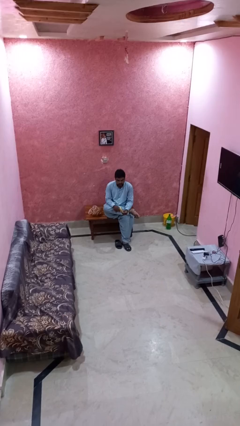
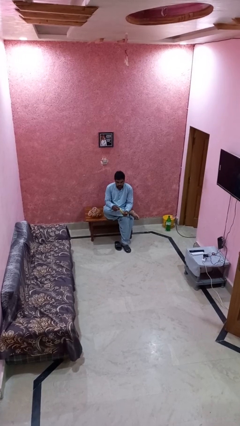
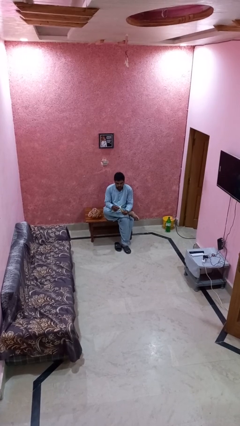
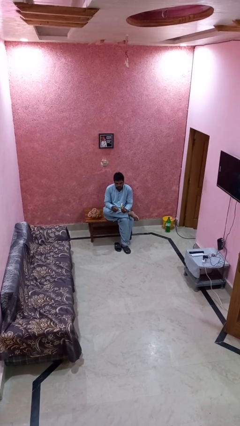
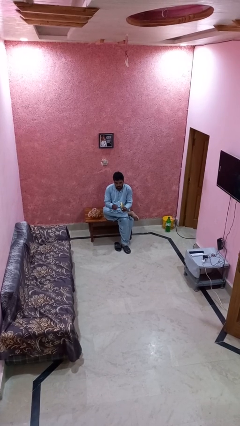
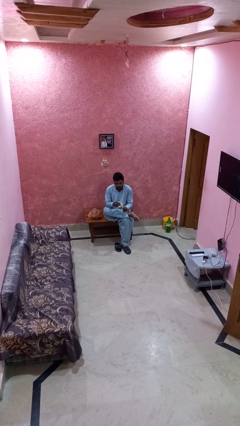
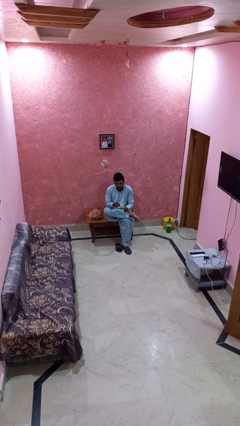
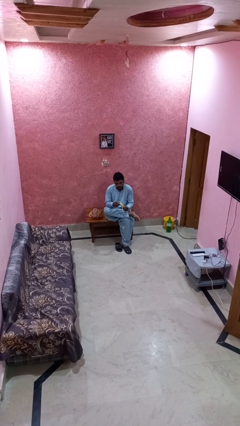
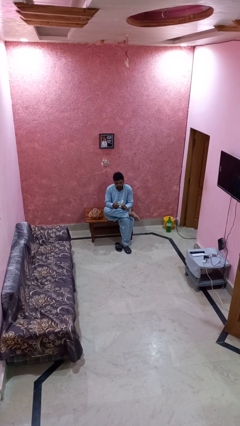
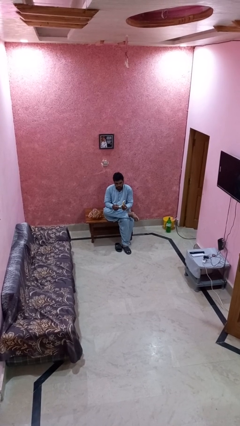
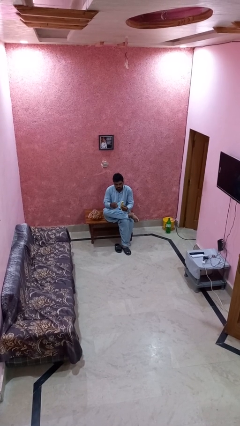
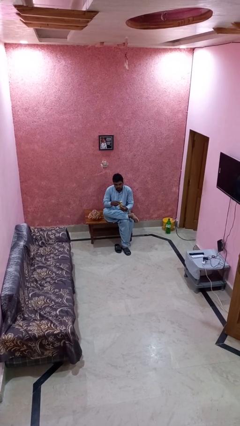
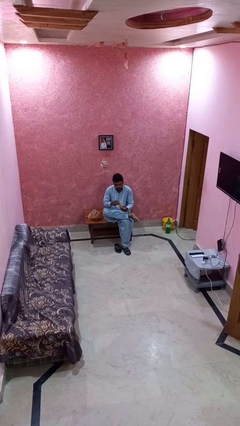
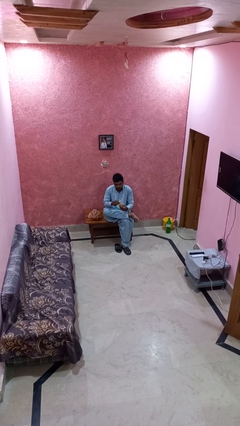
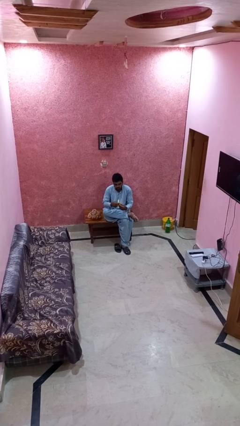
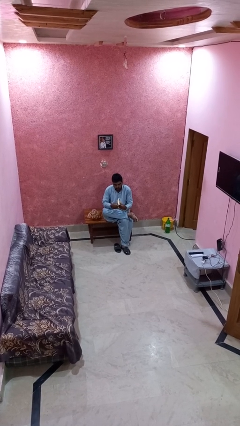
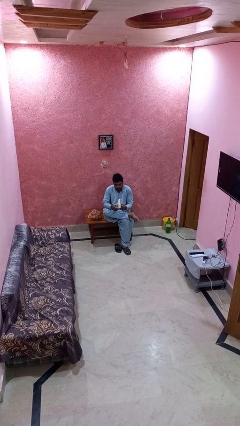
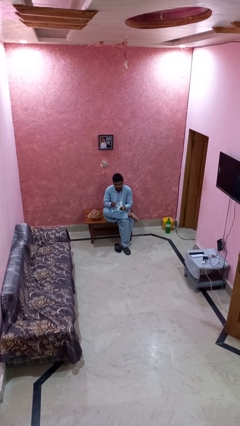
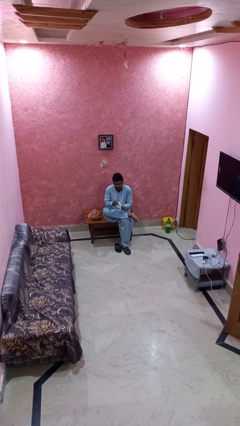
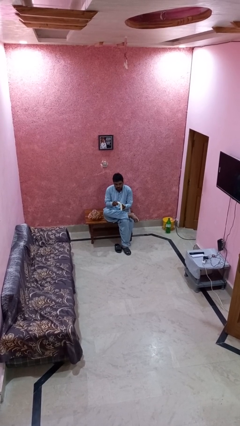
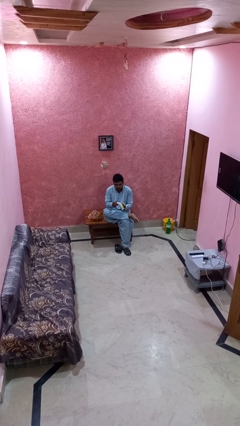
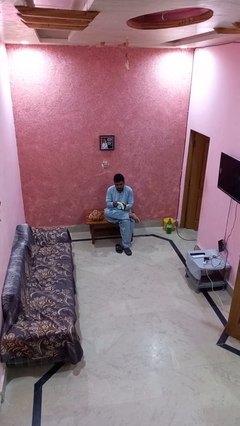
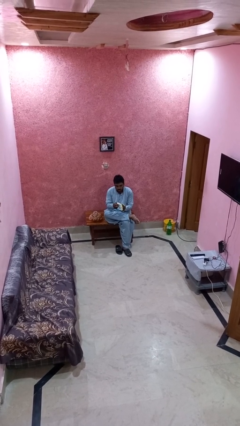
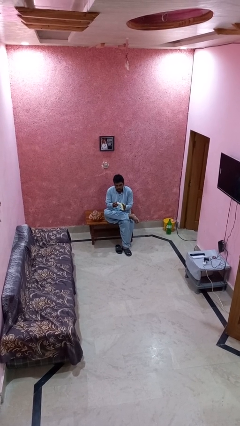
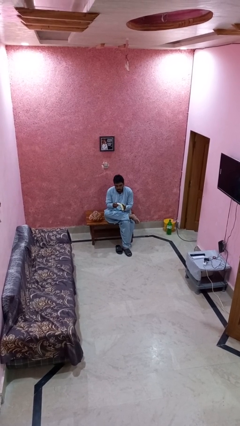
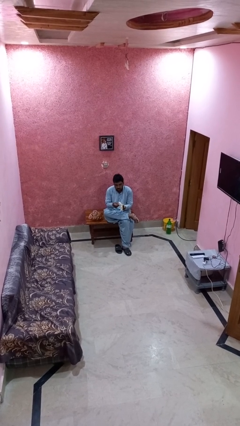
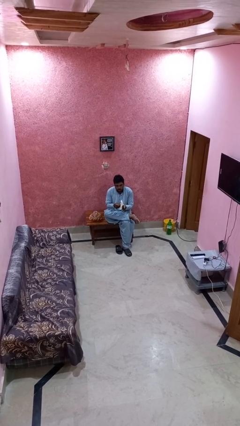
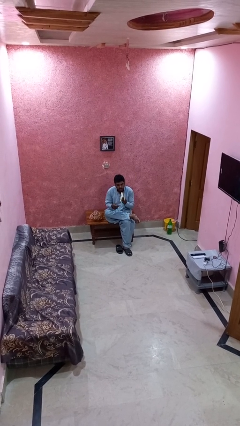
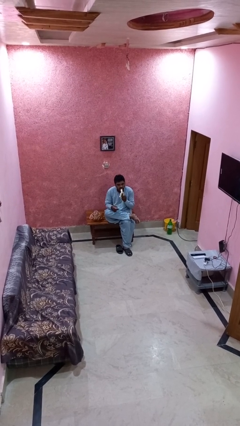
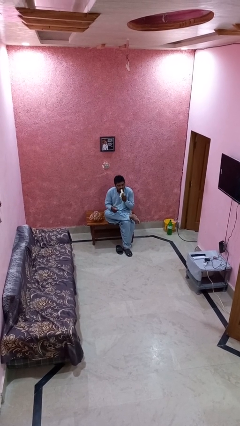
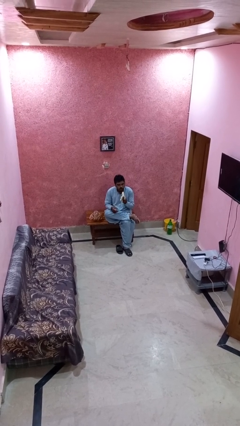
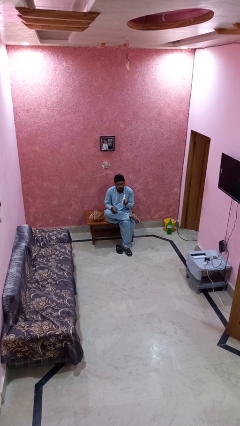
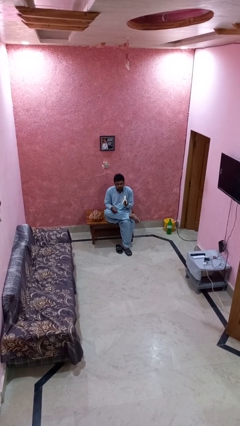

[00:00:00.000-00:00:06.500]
person eats banana

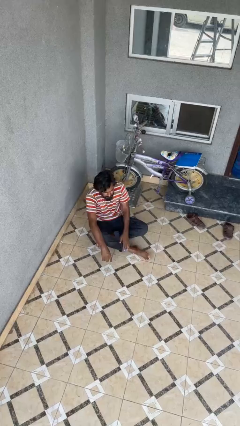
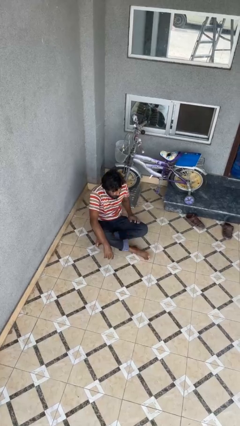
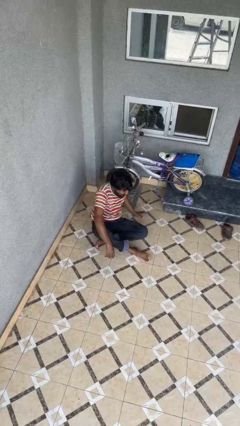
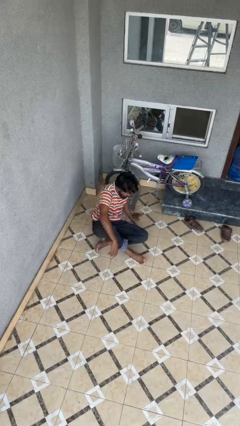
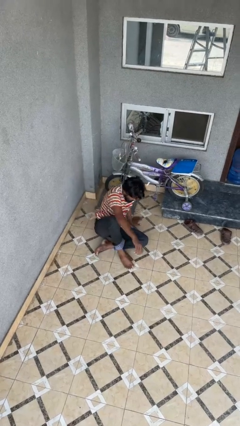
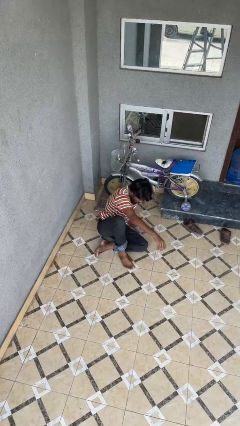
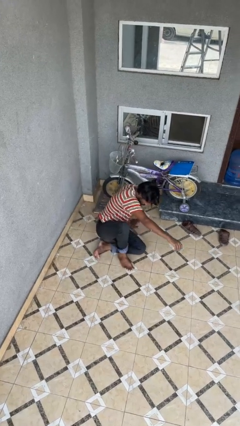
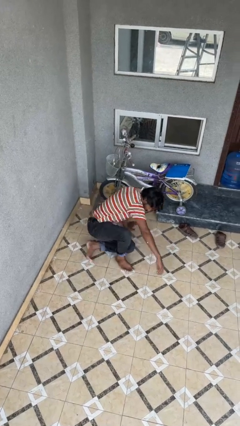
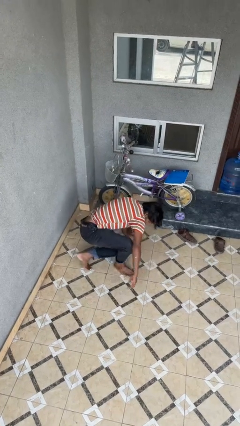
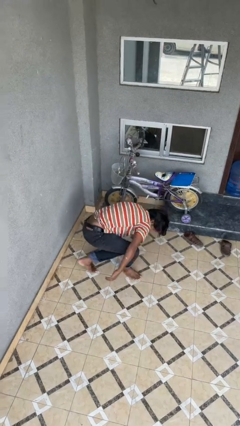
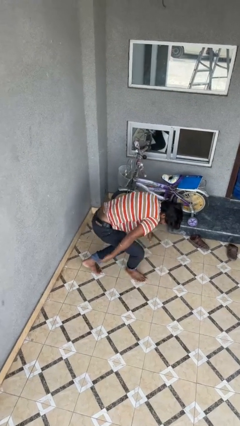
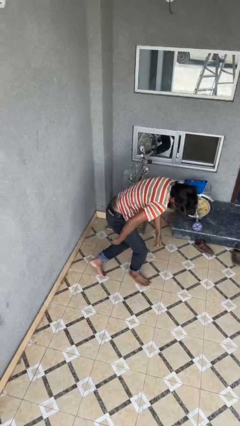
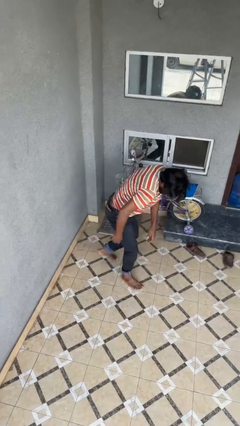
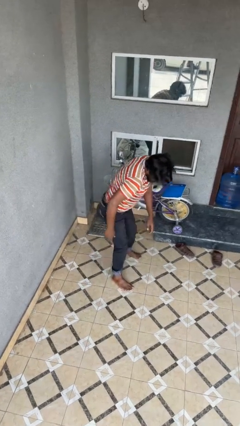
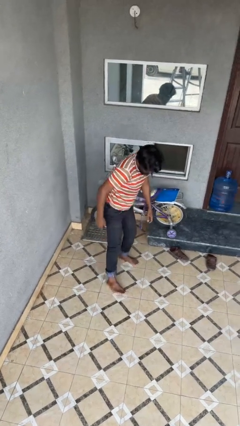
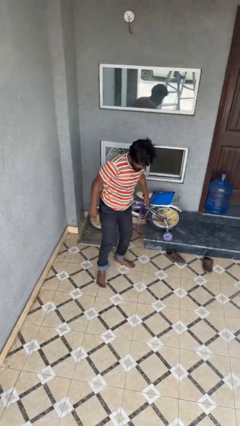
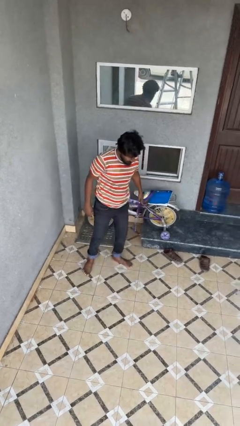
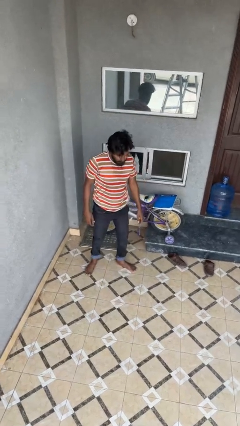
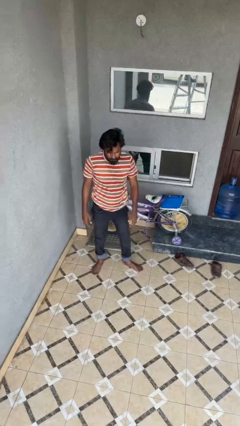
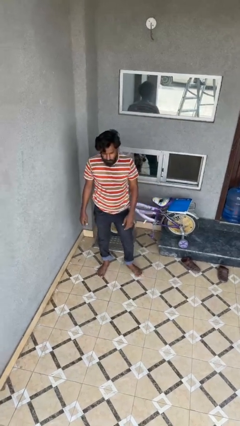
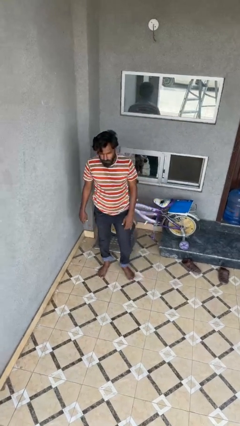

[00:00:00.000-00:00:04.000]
person stands up from floor

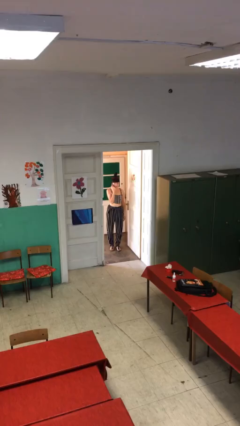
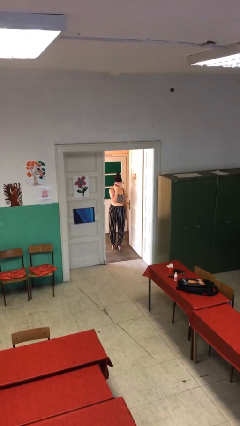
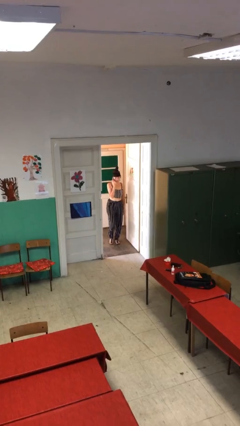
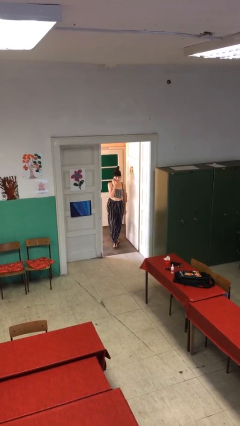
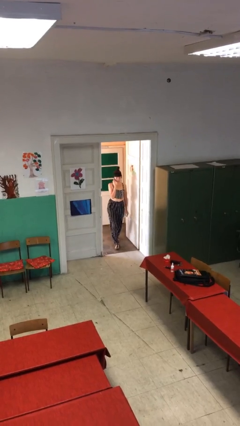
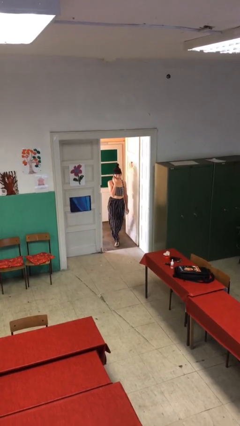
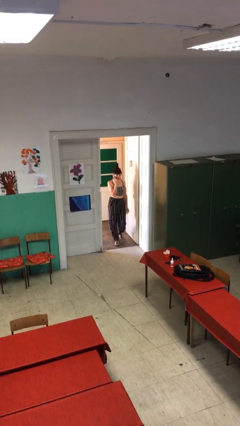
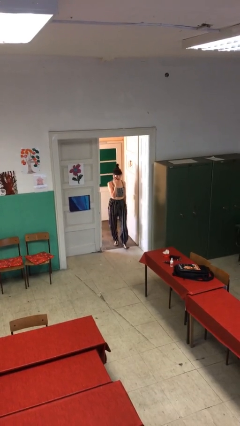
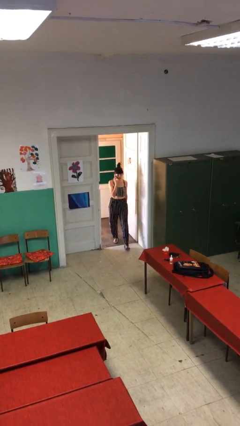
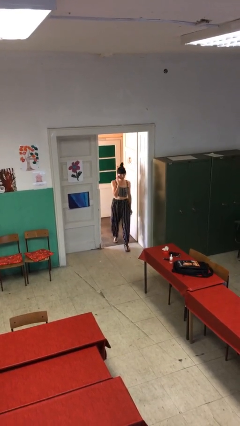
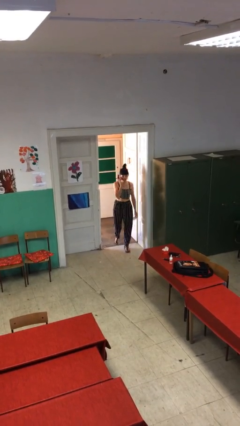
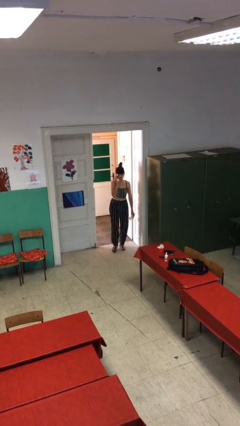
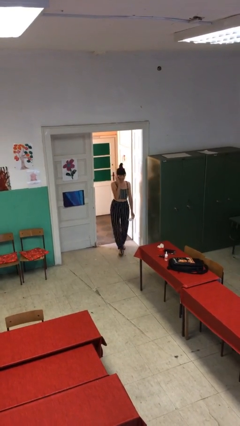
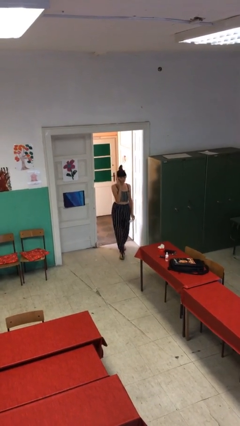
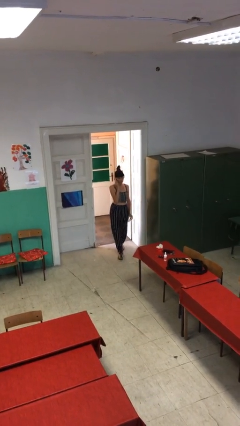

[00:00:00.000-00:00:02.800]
person enters scene through structure

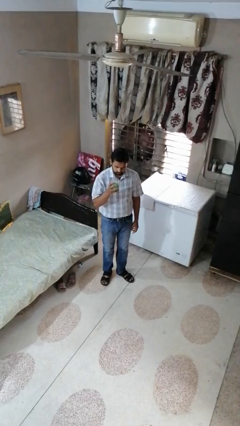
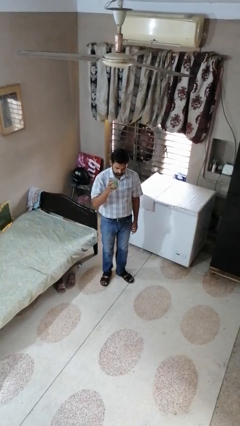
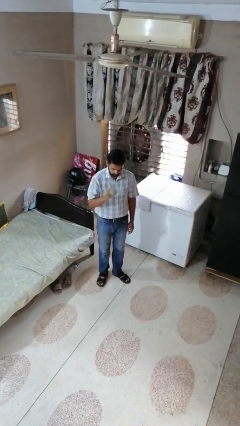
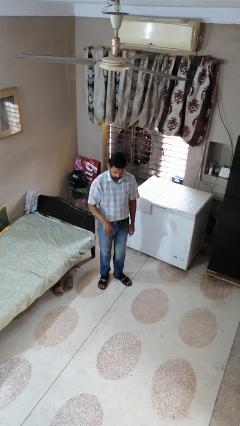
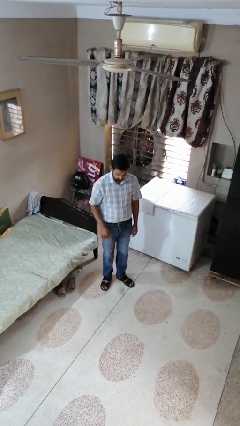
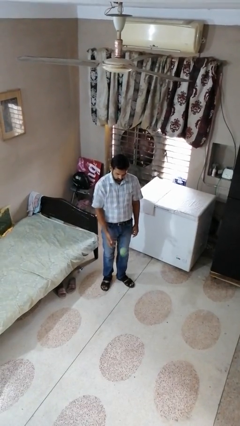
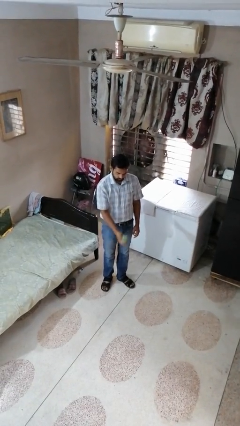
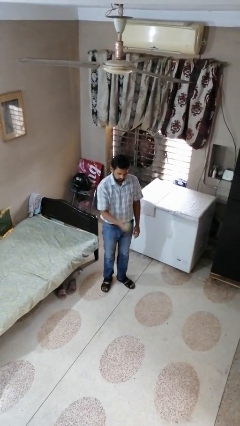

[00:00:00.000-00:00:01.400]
person bounces ball on floor

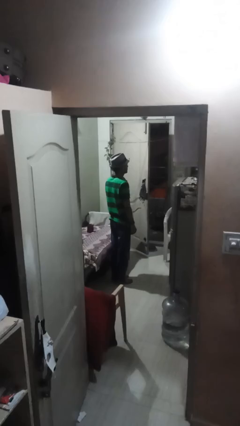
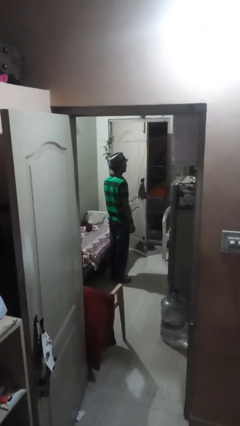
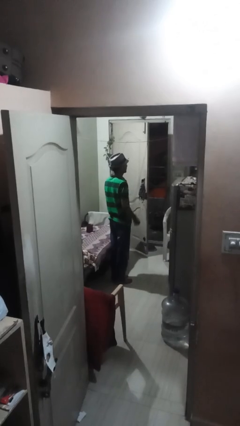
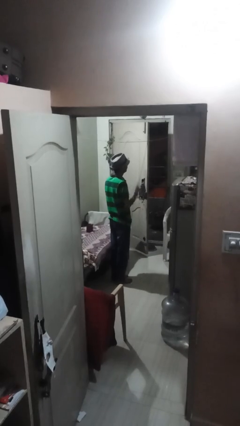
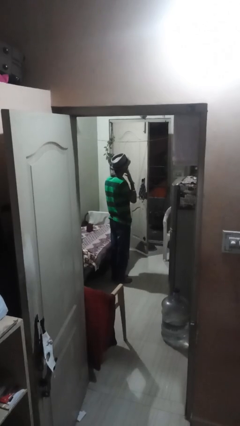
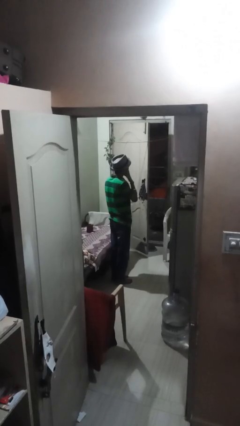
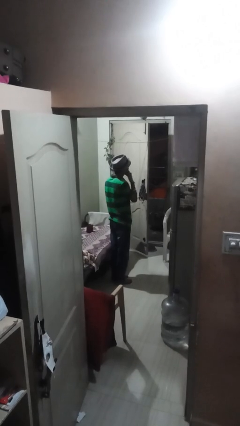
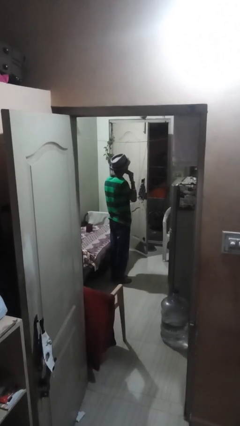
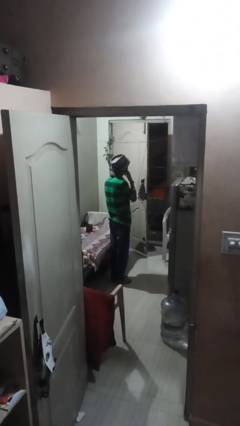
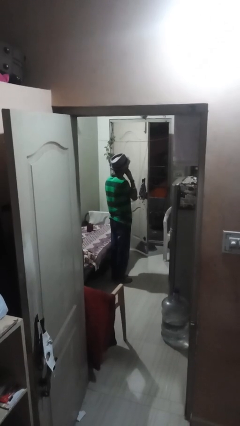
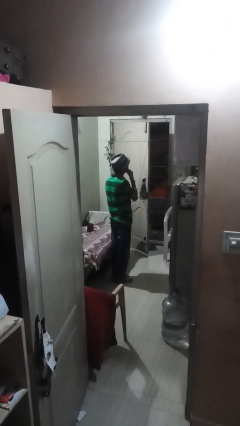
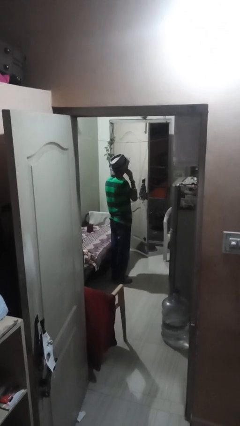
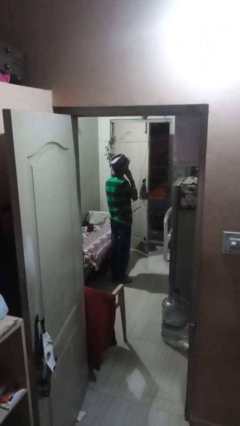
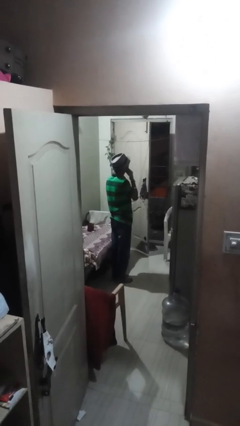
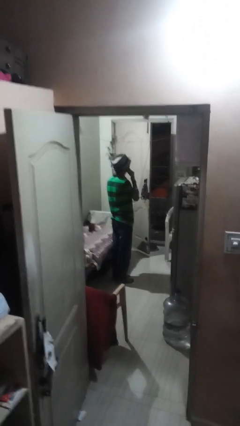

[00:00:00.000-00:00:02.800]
person strokes chin

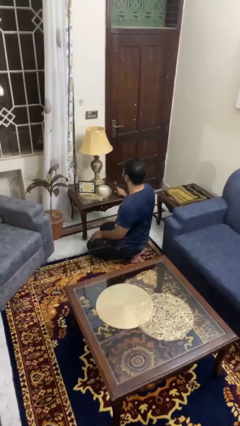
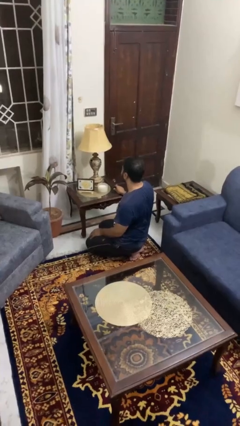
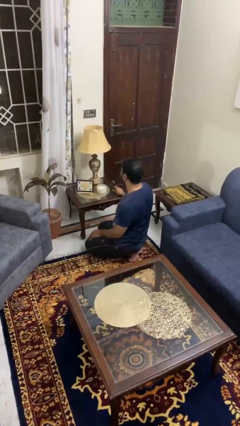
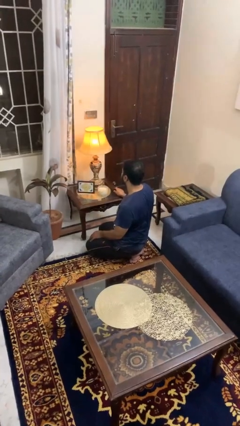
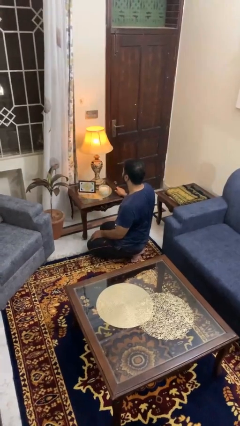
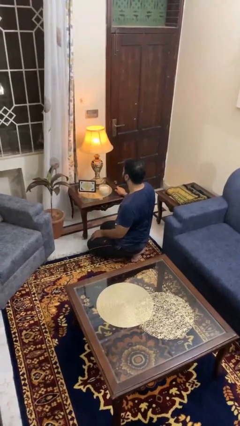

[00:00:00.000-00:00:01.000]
person turns on lamp
